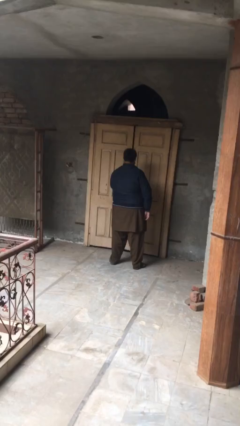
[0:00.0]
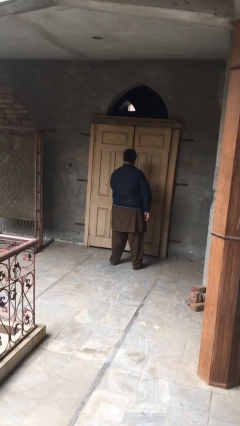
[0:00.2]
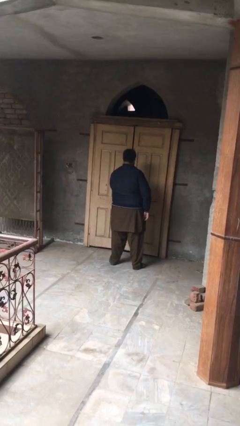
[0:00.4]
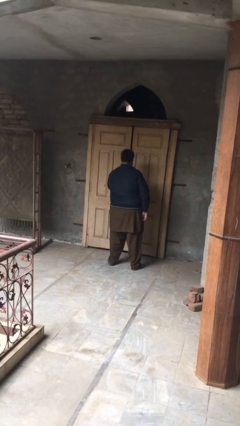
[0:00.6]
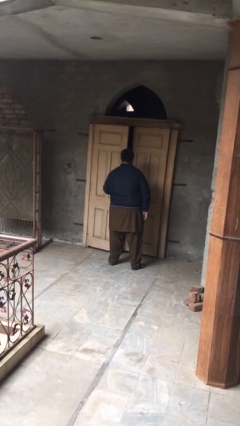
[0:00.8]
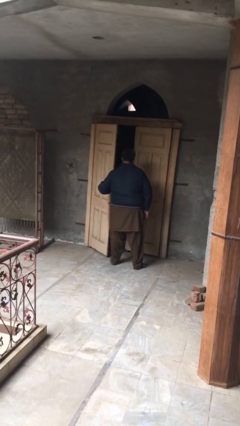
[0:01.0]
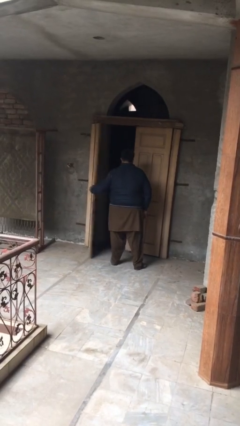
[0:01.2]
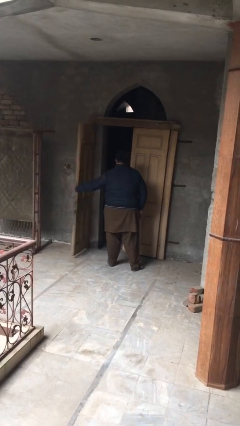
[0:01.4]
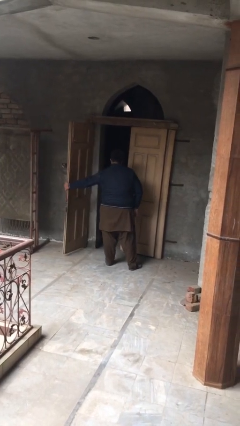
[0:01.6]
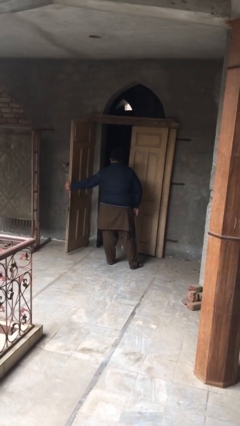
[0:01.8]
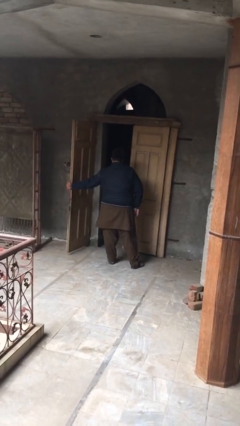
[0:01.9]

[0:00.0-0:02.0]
person opens facility door

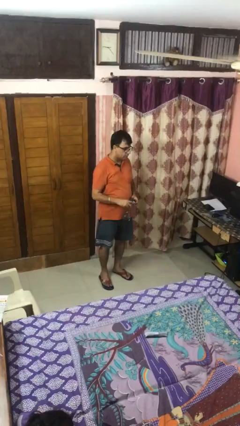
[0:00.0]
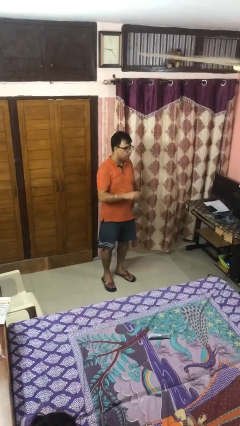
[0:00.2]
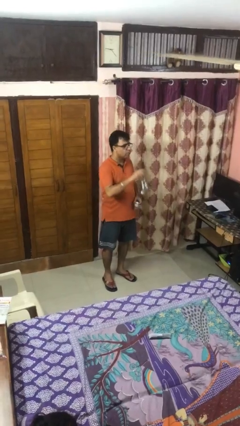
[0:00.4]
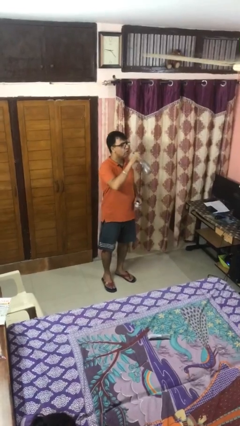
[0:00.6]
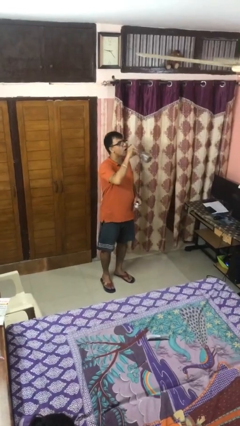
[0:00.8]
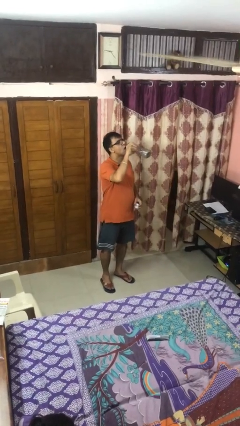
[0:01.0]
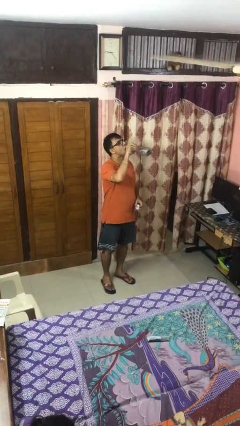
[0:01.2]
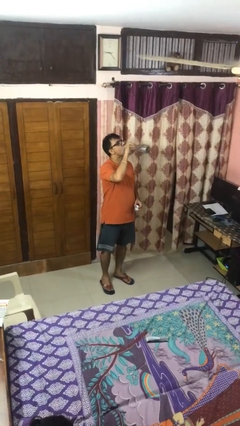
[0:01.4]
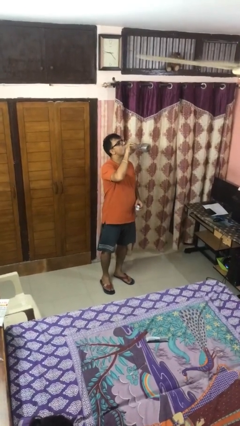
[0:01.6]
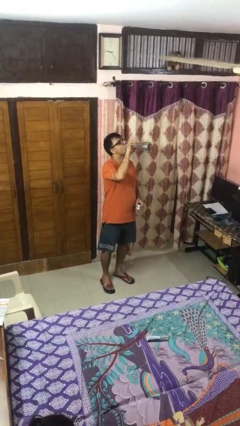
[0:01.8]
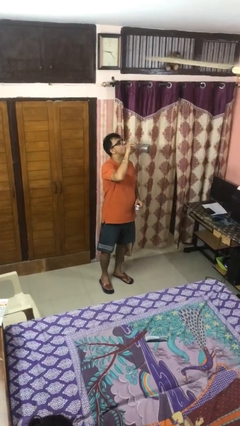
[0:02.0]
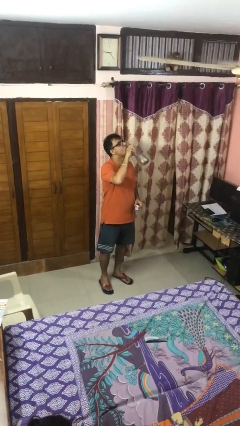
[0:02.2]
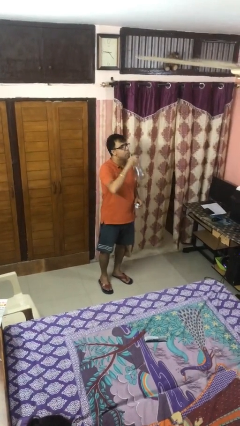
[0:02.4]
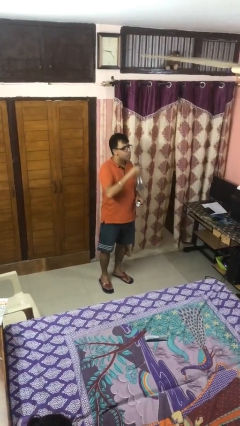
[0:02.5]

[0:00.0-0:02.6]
person drinks from bottle

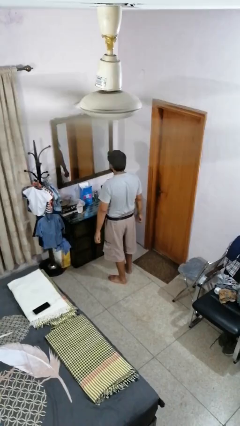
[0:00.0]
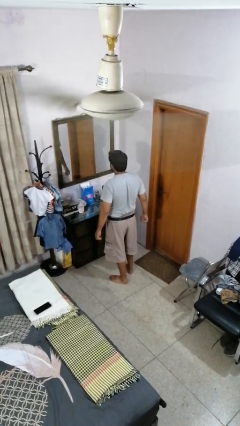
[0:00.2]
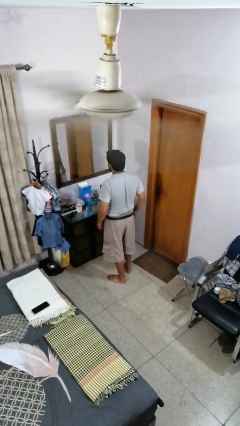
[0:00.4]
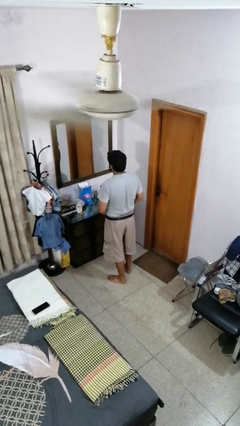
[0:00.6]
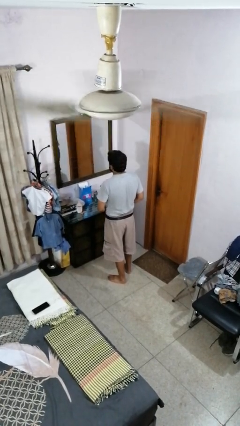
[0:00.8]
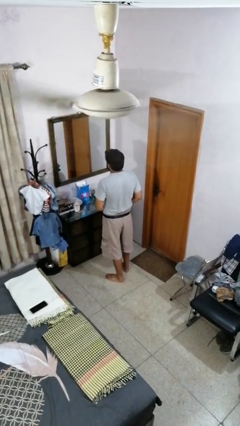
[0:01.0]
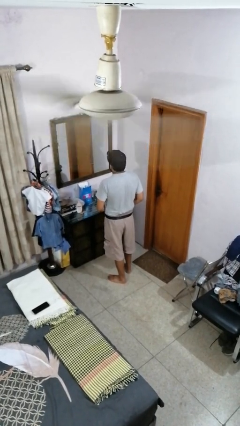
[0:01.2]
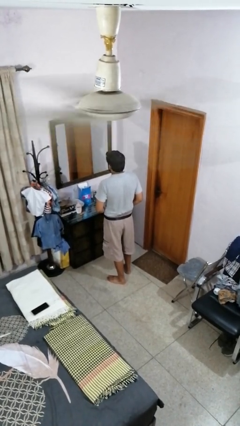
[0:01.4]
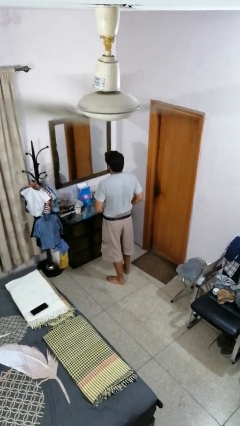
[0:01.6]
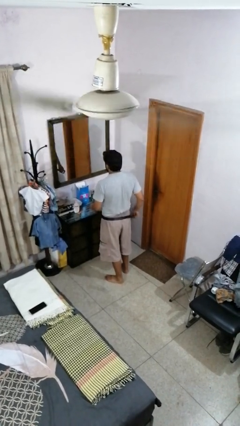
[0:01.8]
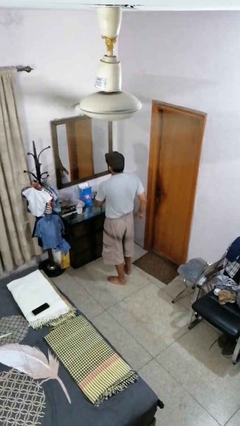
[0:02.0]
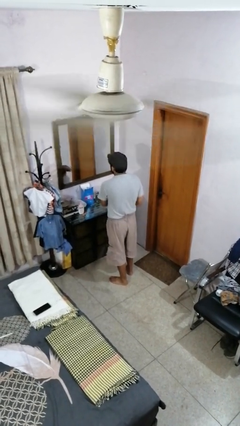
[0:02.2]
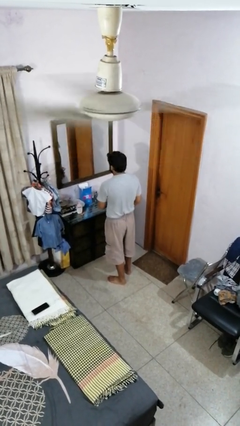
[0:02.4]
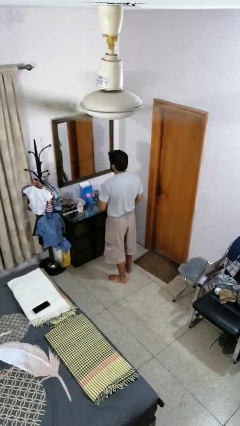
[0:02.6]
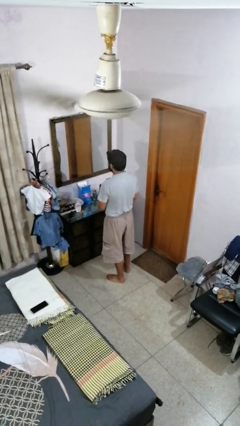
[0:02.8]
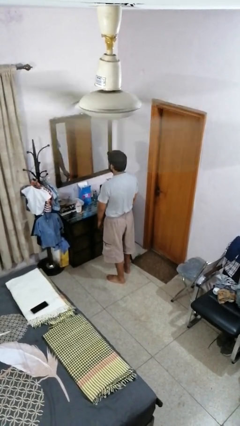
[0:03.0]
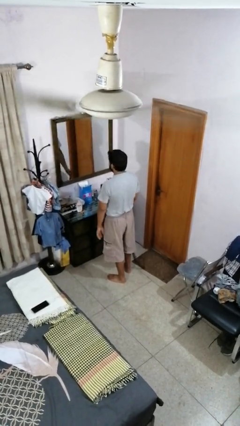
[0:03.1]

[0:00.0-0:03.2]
person takes off belt

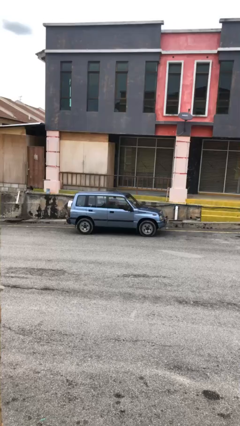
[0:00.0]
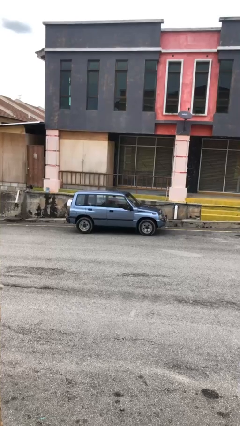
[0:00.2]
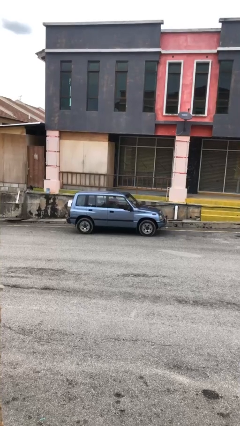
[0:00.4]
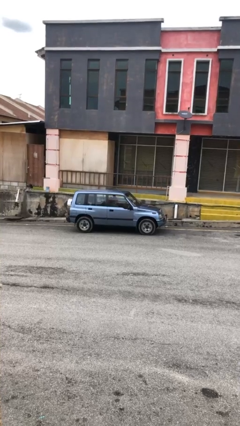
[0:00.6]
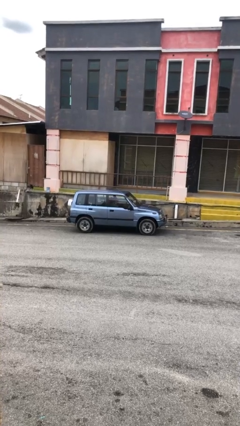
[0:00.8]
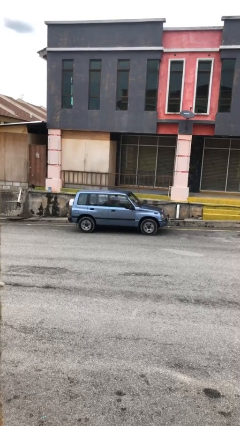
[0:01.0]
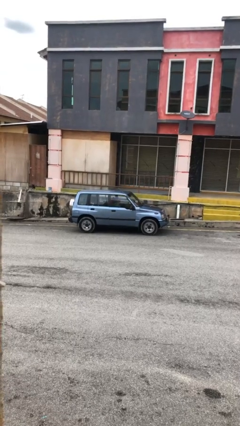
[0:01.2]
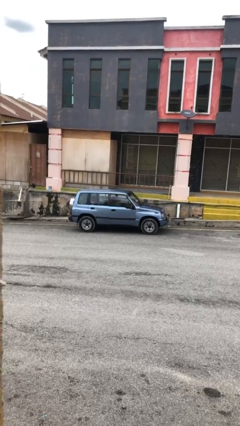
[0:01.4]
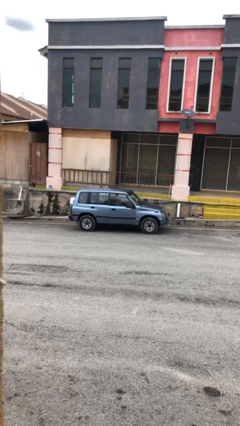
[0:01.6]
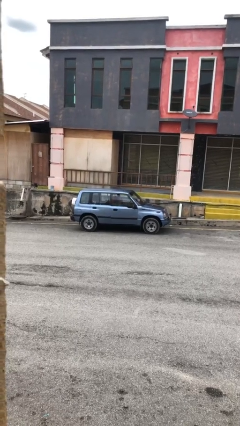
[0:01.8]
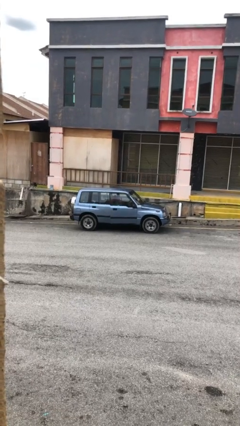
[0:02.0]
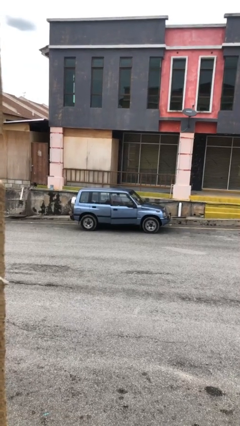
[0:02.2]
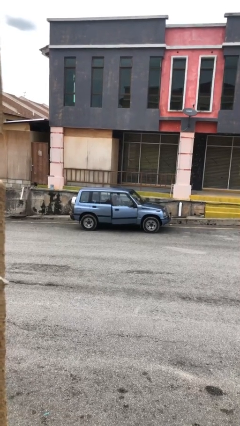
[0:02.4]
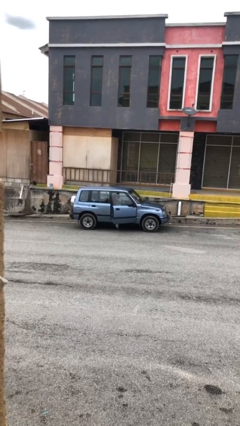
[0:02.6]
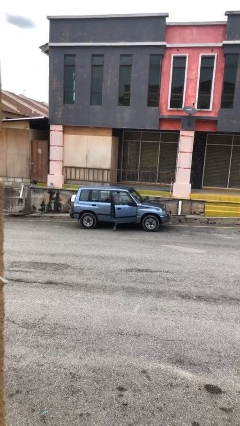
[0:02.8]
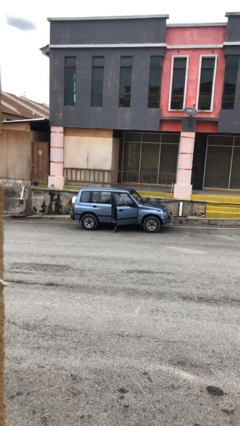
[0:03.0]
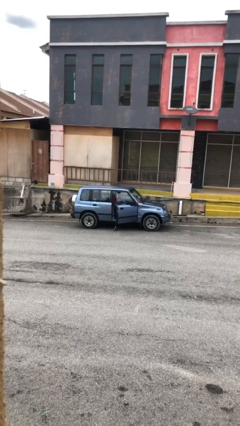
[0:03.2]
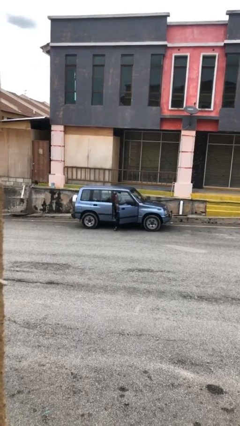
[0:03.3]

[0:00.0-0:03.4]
person opens car door

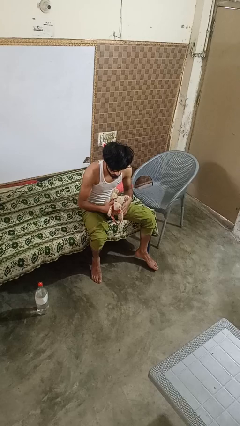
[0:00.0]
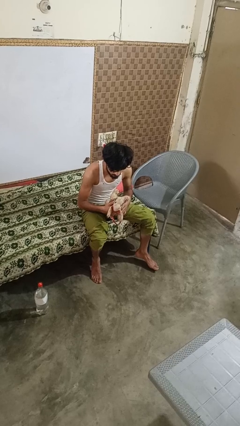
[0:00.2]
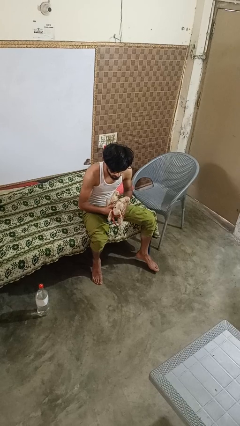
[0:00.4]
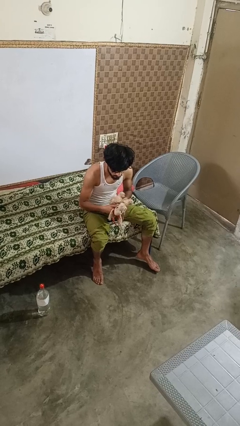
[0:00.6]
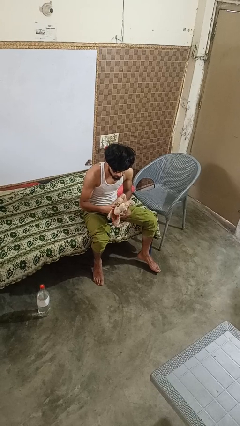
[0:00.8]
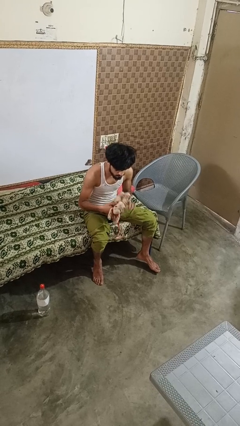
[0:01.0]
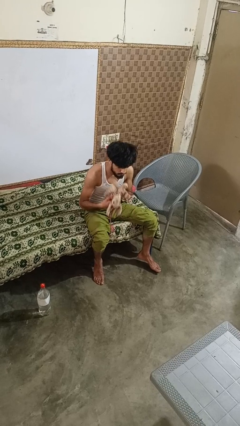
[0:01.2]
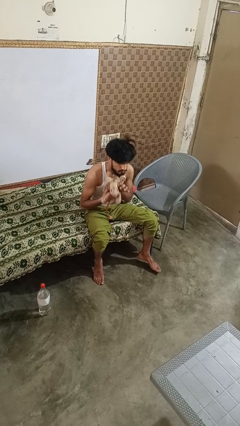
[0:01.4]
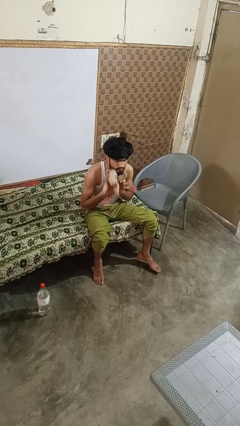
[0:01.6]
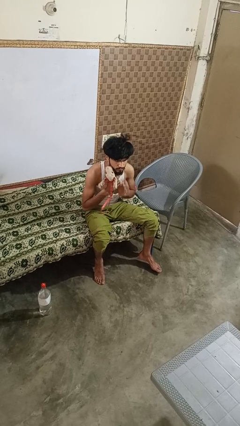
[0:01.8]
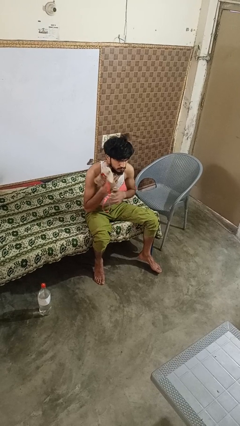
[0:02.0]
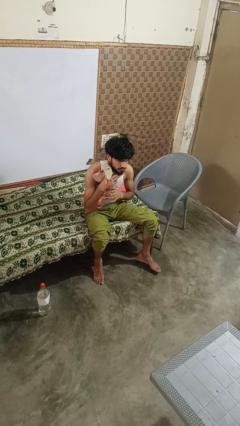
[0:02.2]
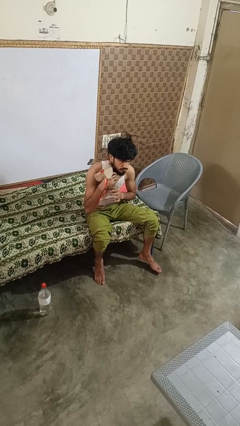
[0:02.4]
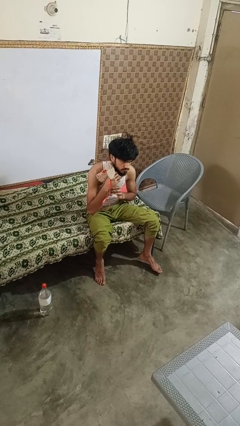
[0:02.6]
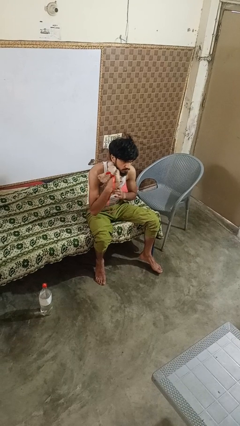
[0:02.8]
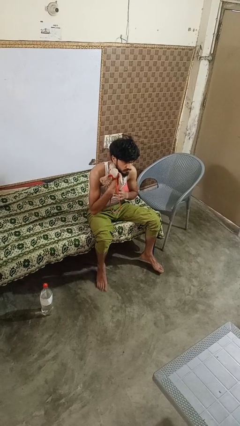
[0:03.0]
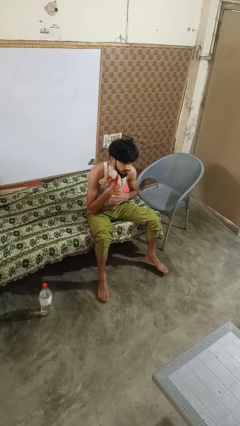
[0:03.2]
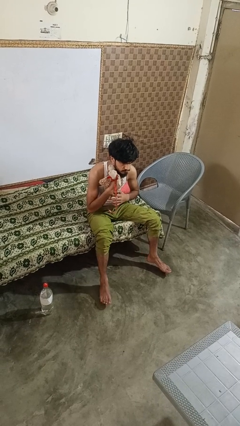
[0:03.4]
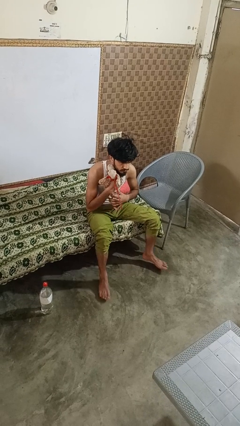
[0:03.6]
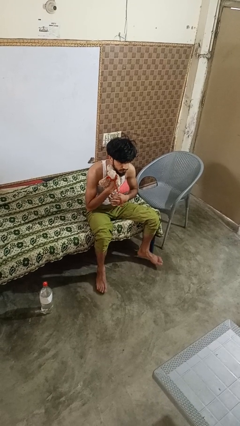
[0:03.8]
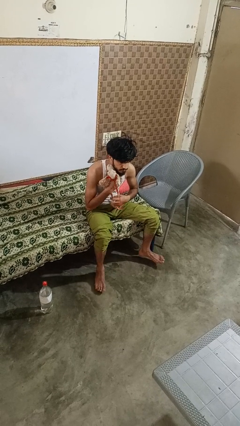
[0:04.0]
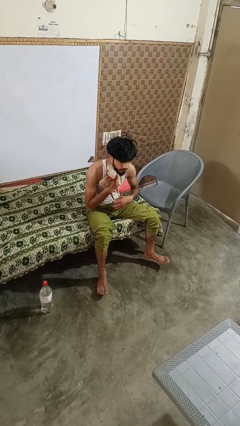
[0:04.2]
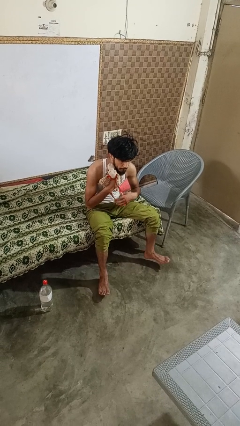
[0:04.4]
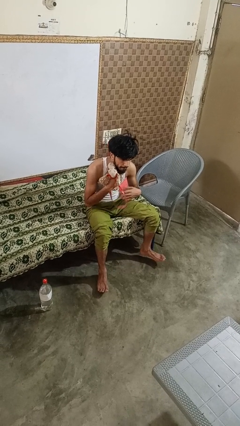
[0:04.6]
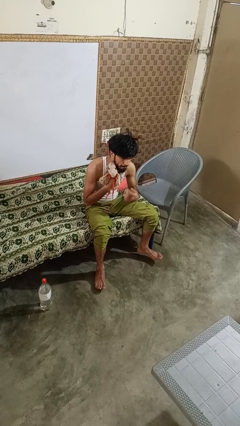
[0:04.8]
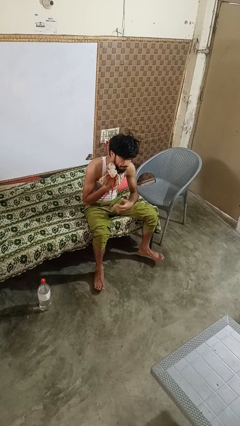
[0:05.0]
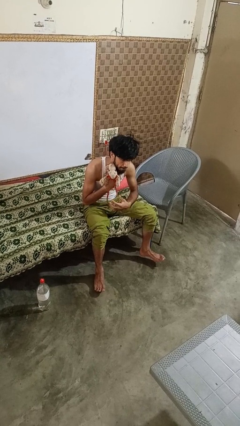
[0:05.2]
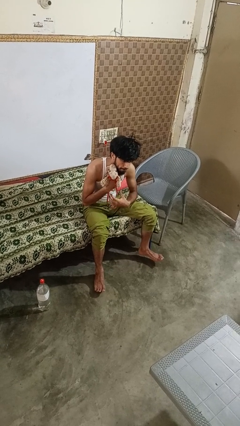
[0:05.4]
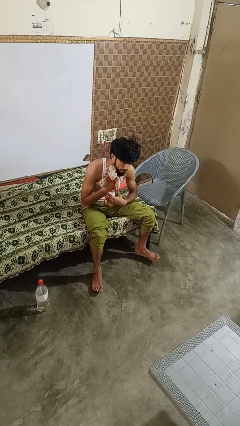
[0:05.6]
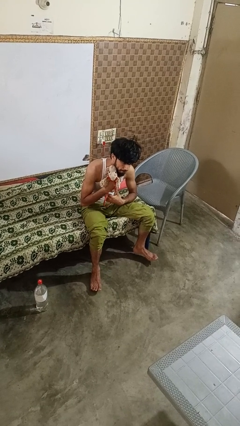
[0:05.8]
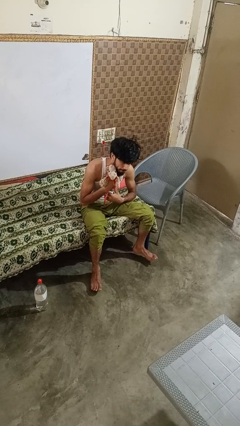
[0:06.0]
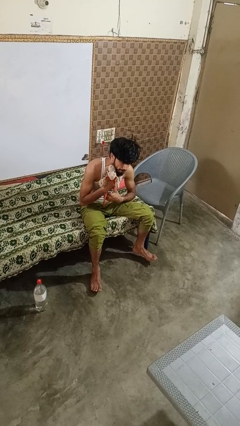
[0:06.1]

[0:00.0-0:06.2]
person hugs stuffed animal

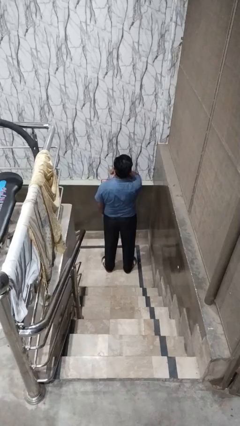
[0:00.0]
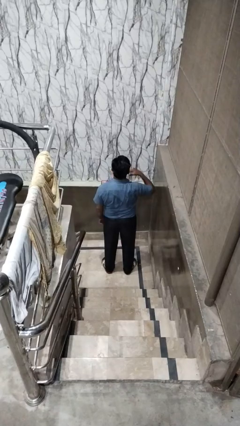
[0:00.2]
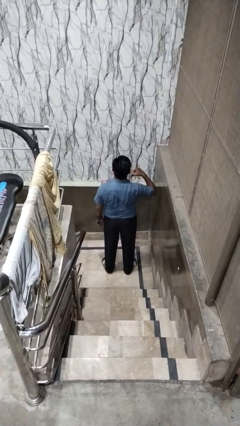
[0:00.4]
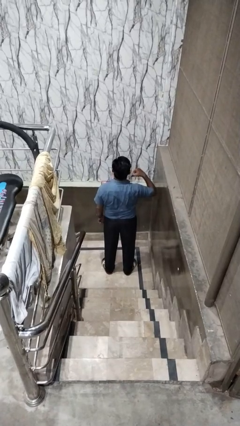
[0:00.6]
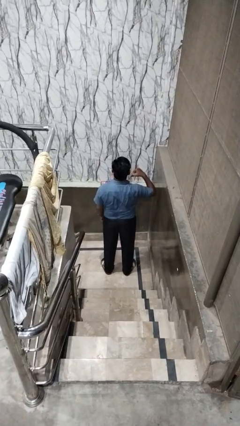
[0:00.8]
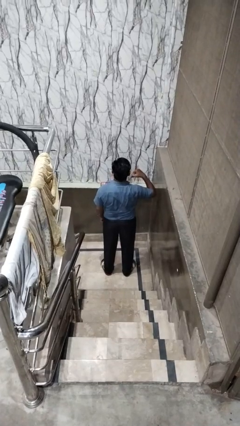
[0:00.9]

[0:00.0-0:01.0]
person gestures cut
